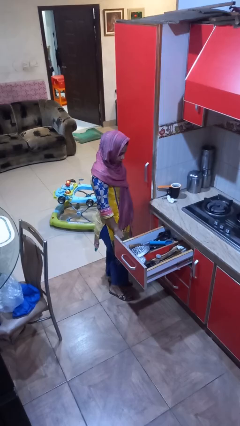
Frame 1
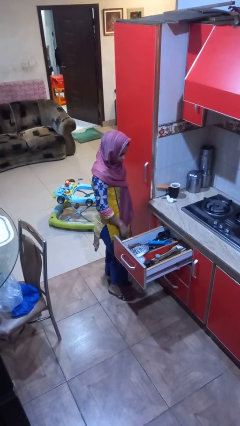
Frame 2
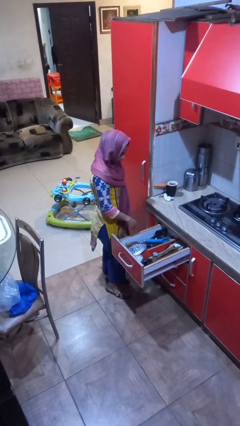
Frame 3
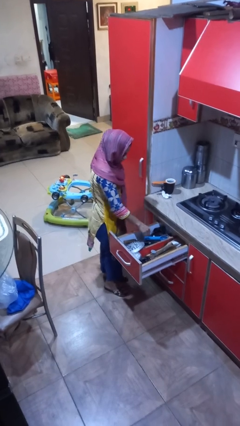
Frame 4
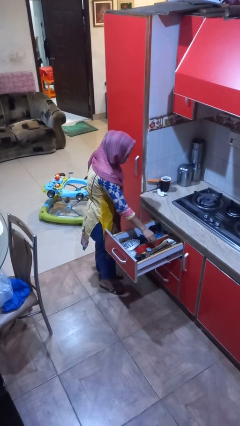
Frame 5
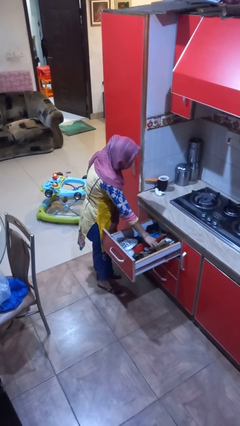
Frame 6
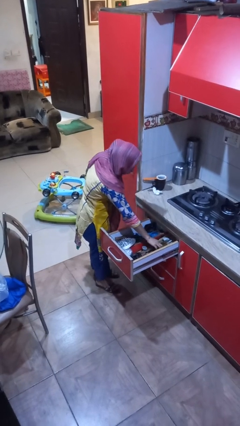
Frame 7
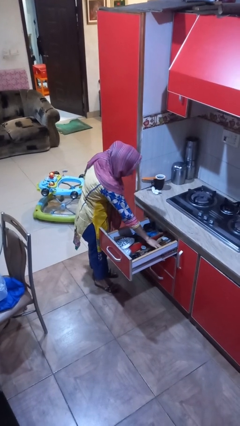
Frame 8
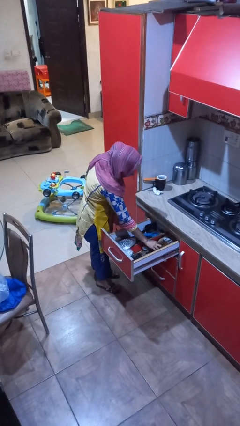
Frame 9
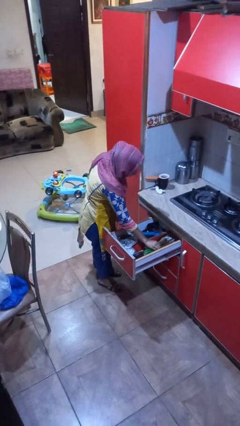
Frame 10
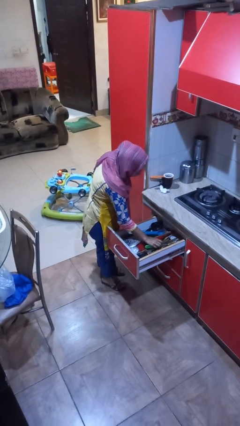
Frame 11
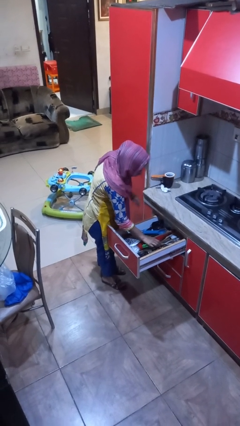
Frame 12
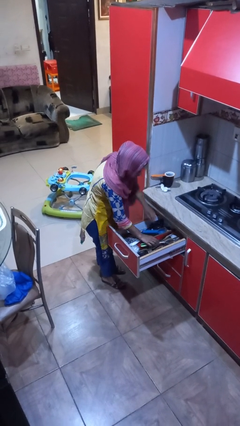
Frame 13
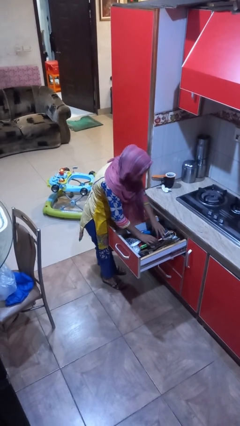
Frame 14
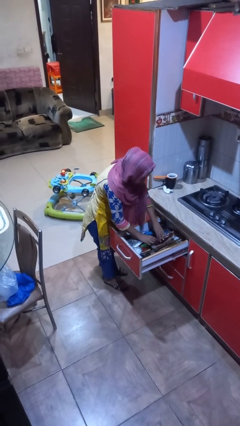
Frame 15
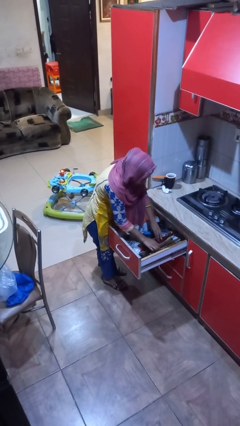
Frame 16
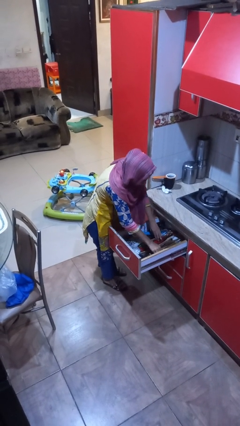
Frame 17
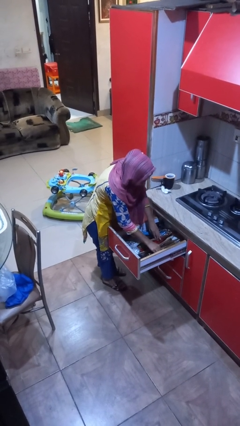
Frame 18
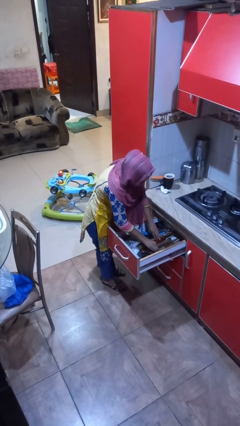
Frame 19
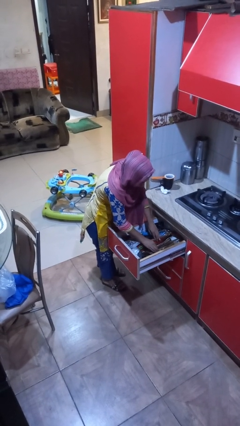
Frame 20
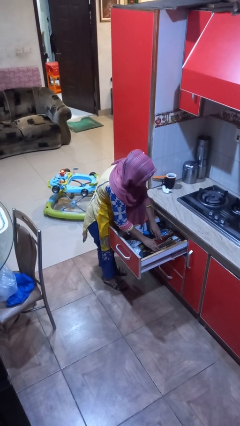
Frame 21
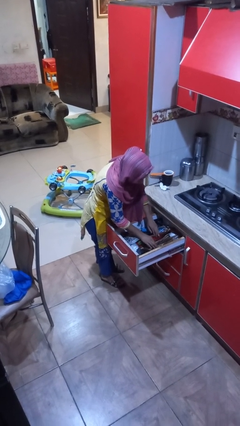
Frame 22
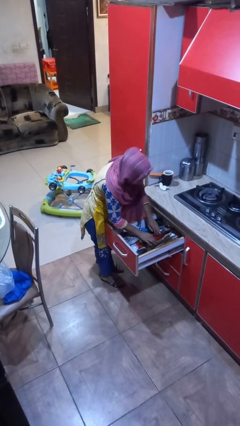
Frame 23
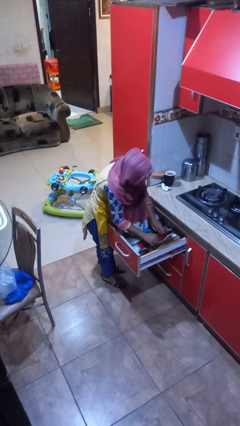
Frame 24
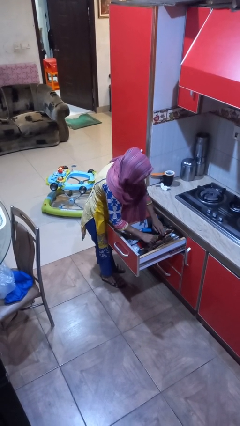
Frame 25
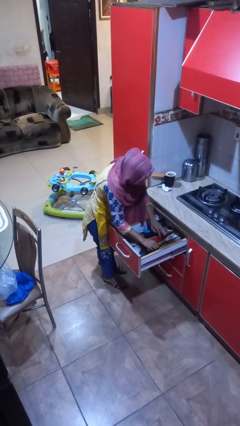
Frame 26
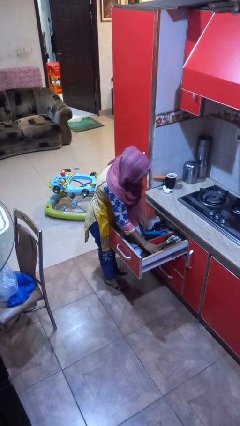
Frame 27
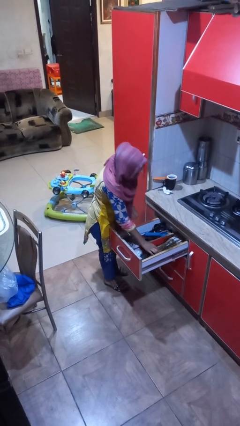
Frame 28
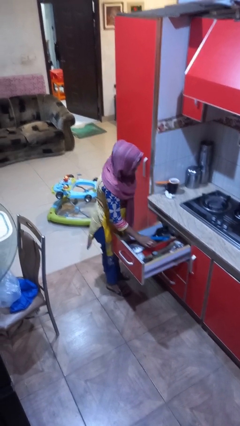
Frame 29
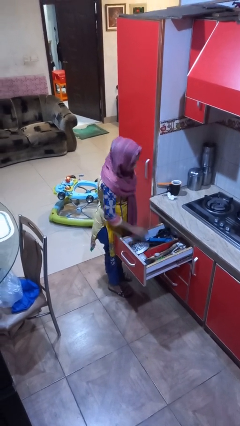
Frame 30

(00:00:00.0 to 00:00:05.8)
person searches in kitchen drawer

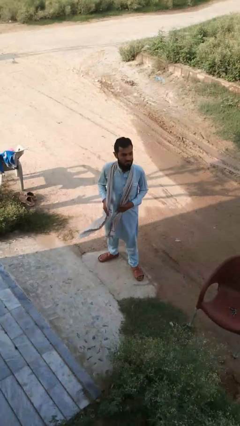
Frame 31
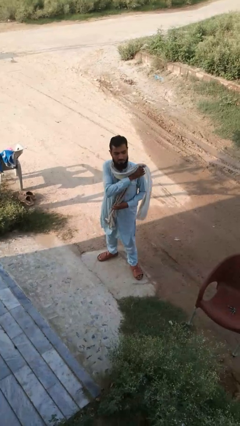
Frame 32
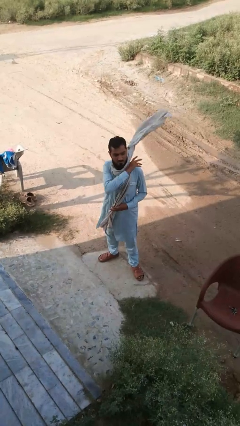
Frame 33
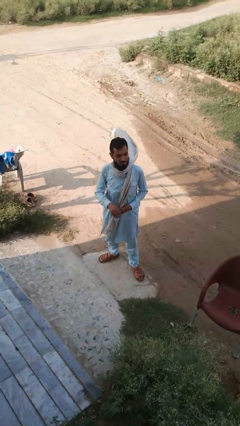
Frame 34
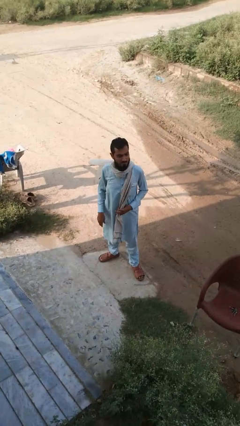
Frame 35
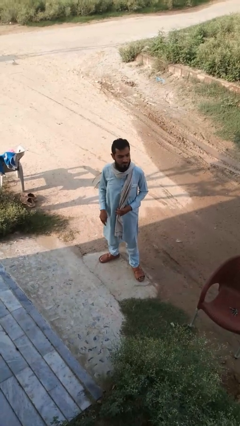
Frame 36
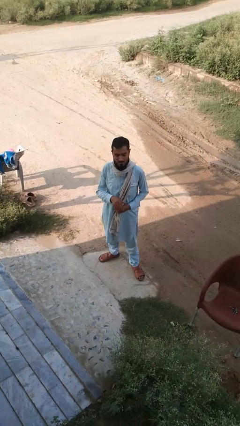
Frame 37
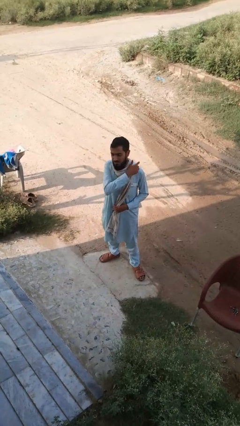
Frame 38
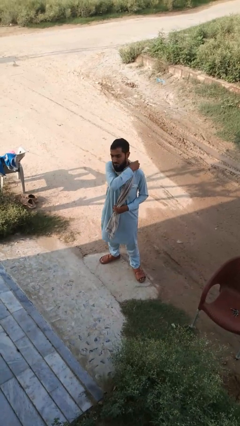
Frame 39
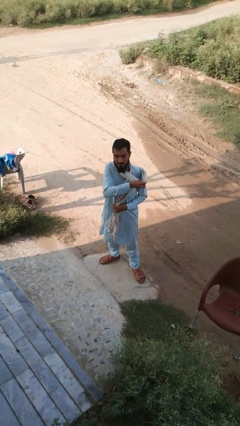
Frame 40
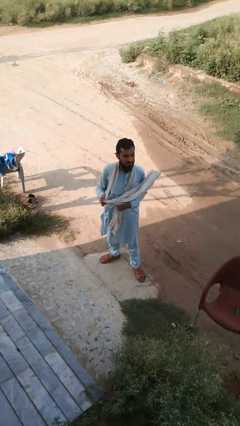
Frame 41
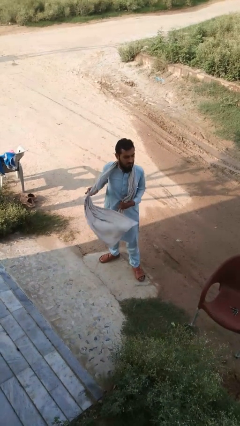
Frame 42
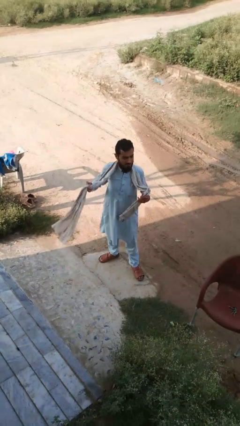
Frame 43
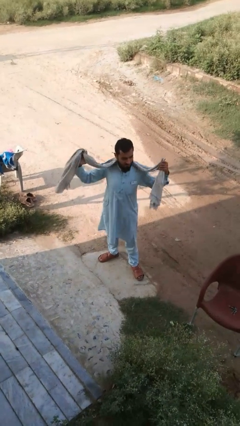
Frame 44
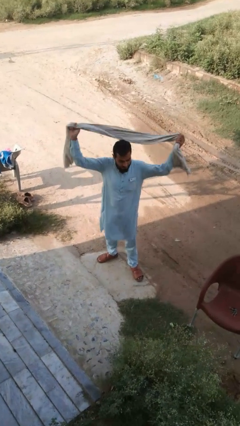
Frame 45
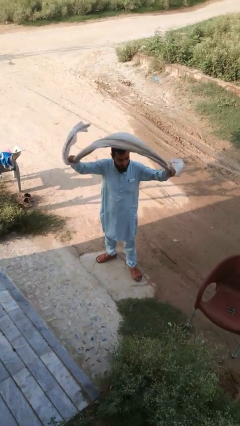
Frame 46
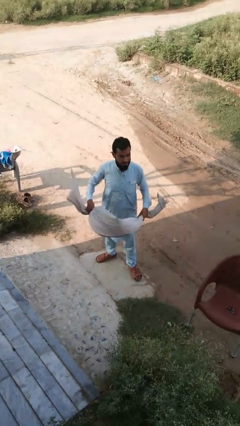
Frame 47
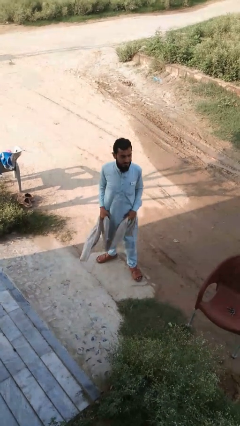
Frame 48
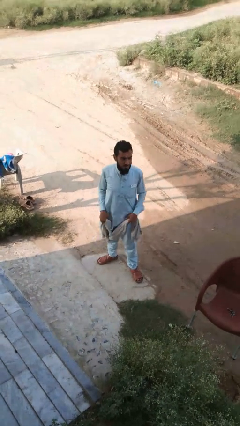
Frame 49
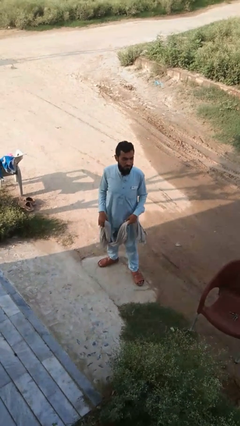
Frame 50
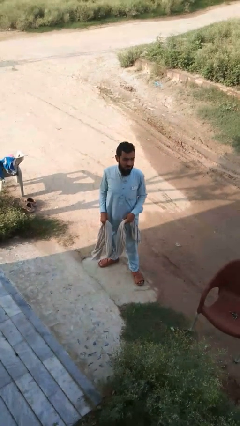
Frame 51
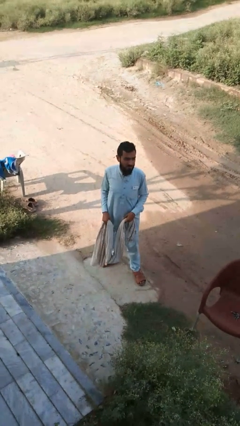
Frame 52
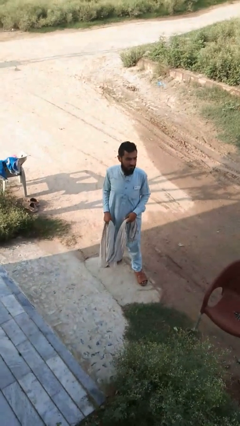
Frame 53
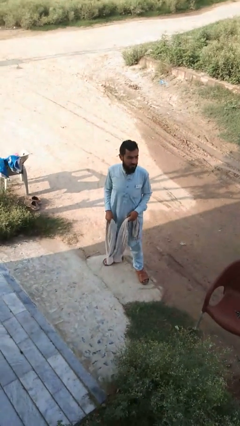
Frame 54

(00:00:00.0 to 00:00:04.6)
person takes off scarf

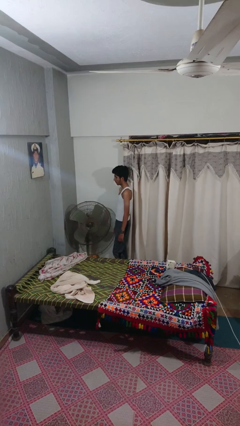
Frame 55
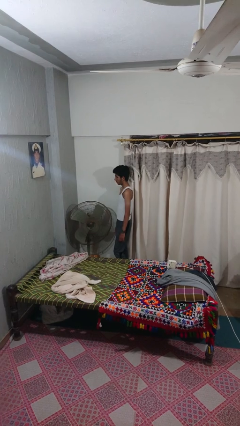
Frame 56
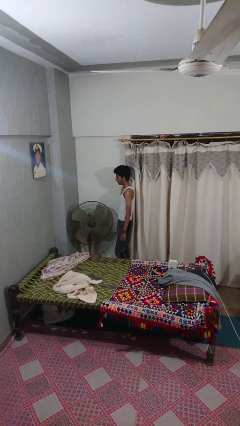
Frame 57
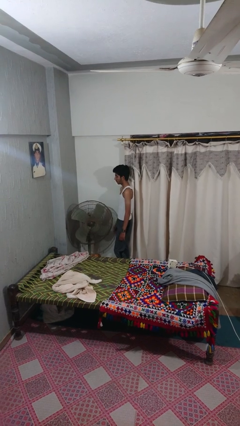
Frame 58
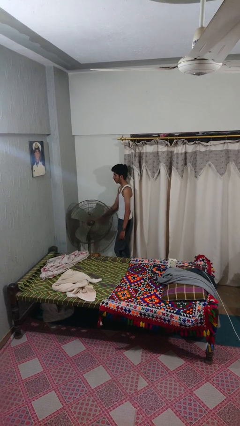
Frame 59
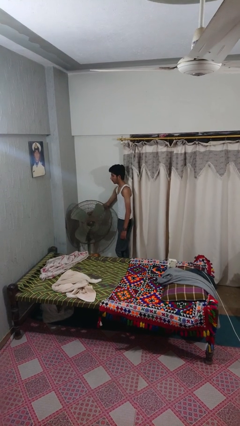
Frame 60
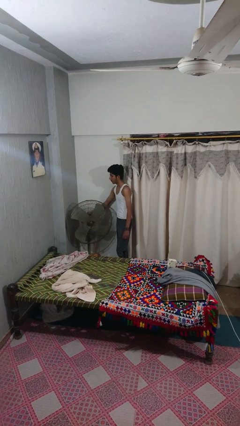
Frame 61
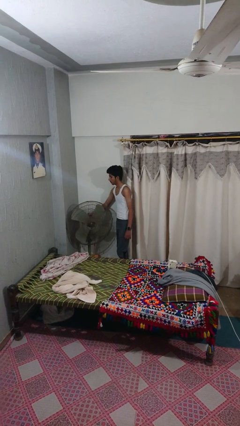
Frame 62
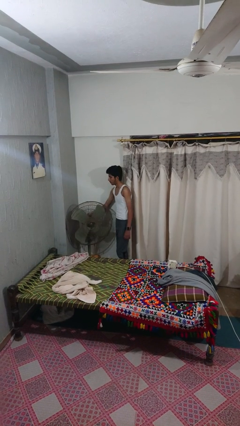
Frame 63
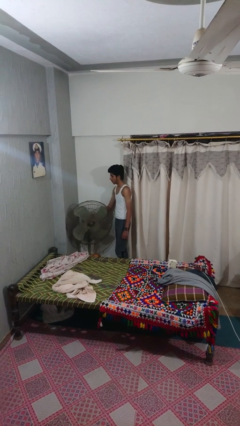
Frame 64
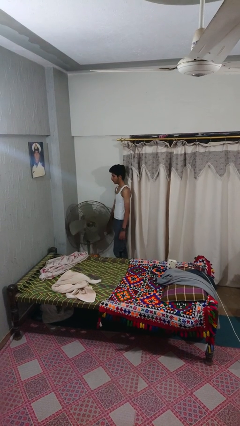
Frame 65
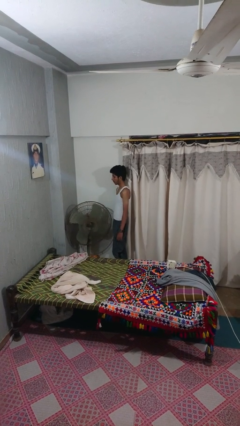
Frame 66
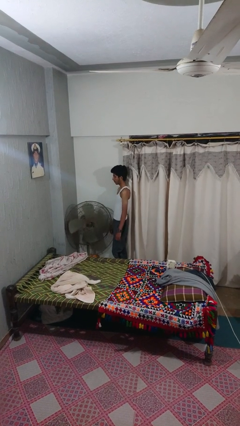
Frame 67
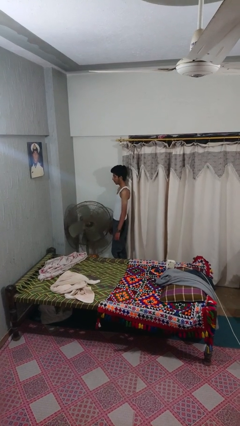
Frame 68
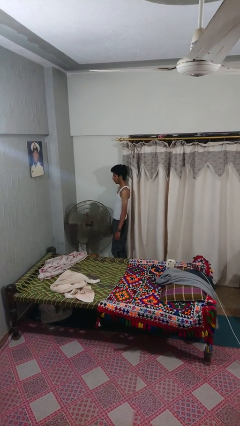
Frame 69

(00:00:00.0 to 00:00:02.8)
person turns on fan

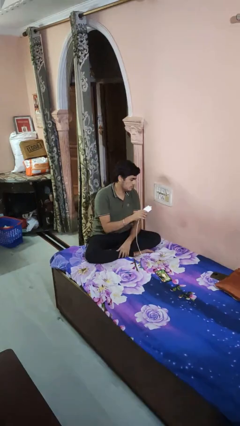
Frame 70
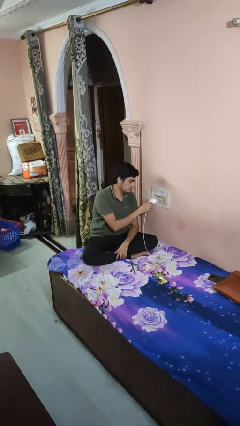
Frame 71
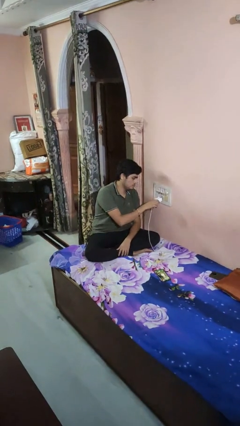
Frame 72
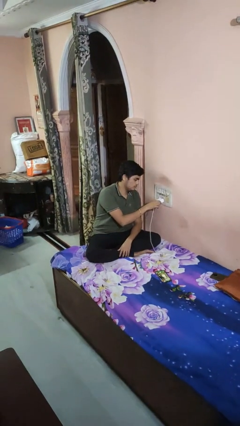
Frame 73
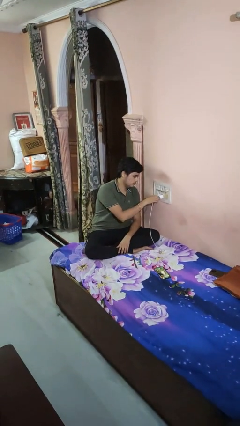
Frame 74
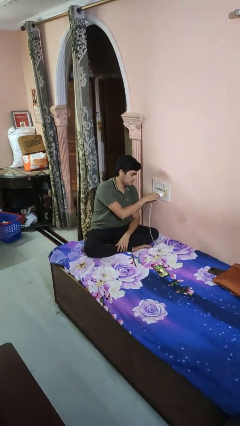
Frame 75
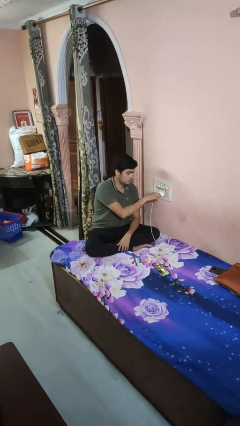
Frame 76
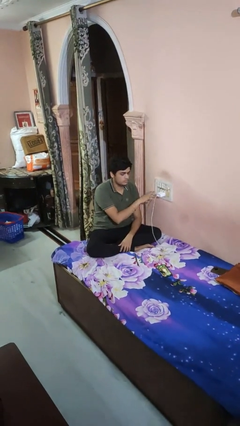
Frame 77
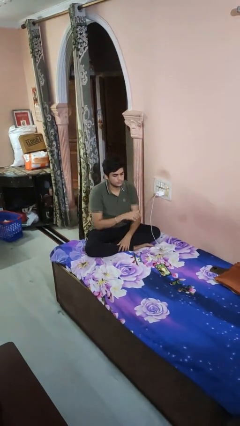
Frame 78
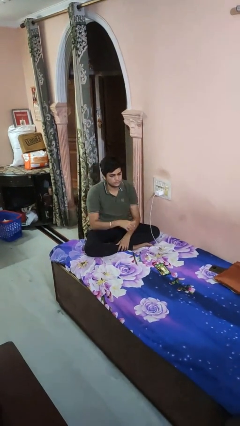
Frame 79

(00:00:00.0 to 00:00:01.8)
person plugs into electrical socket

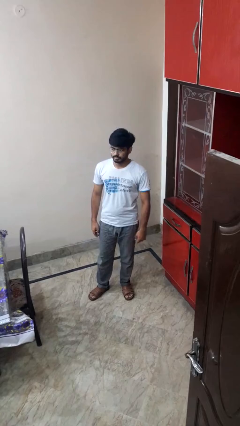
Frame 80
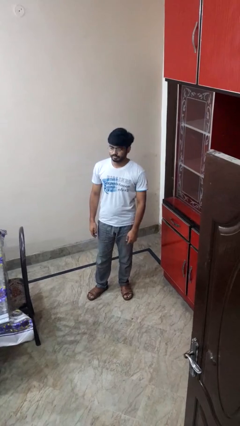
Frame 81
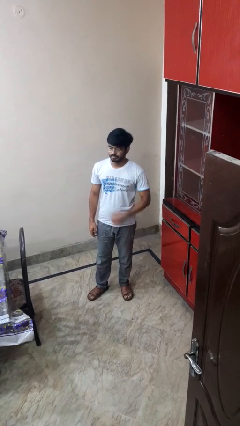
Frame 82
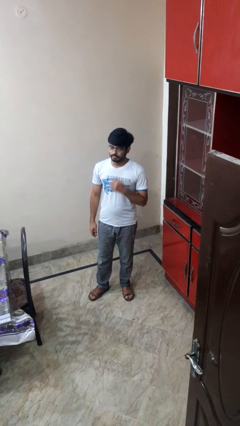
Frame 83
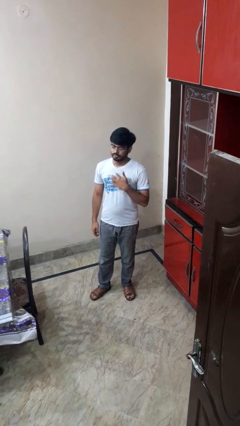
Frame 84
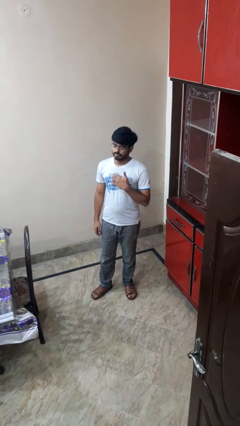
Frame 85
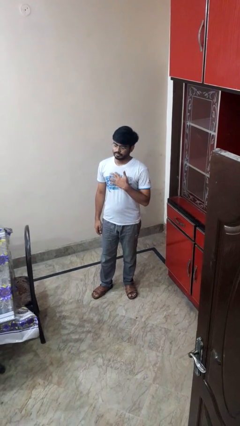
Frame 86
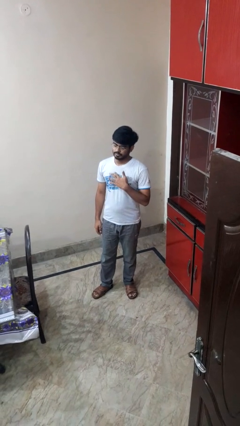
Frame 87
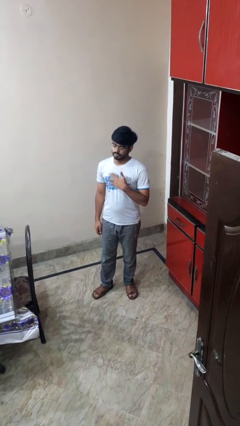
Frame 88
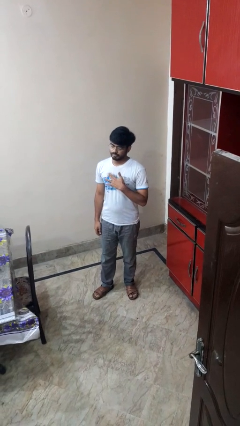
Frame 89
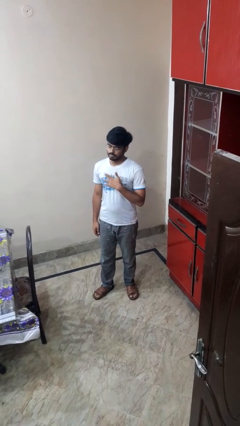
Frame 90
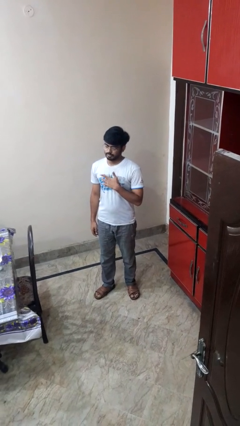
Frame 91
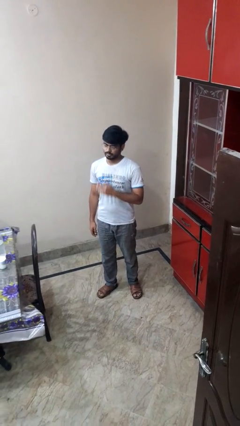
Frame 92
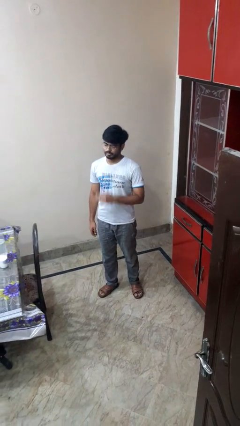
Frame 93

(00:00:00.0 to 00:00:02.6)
person drums on chest
